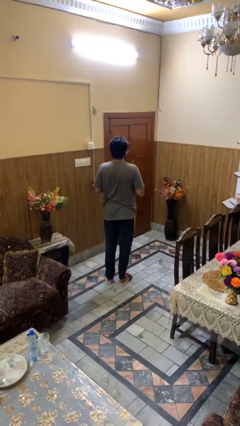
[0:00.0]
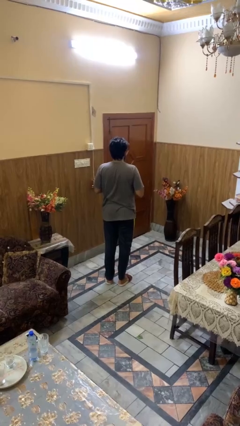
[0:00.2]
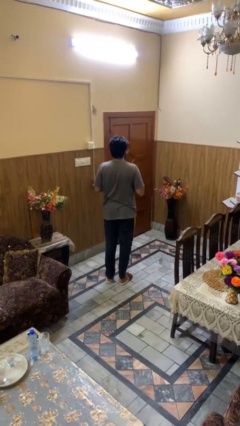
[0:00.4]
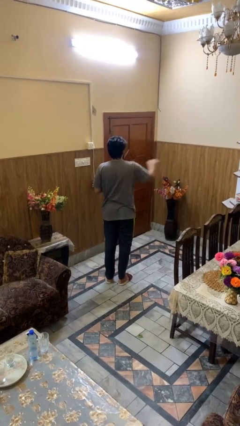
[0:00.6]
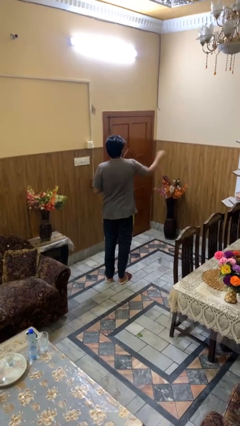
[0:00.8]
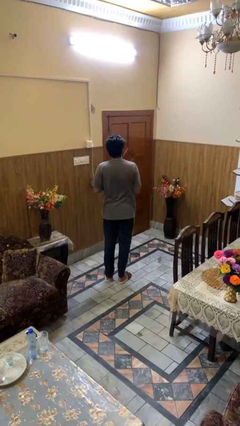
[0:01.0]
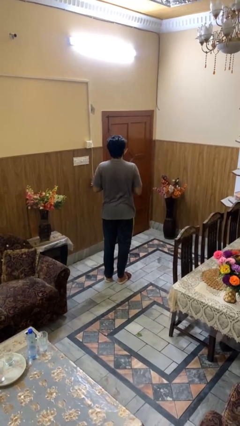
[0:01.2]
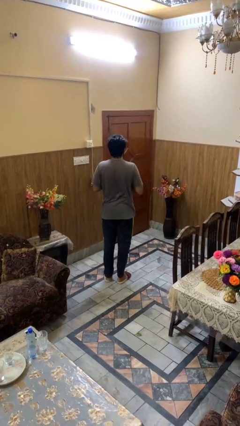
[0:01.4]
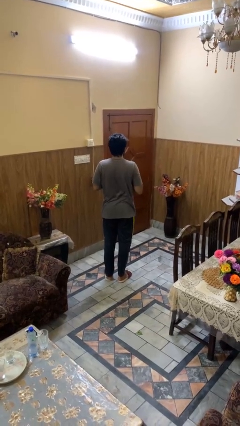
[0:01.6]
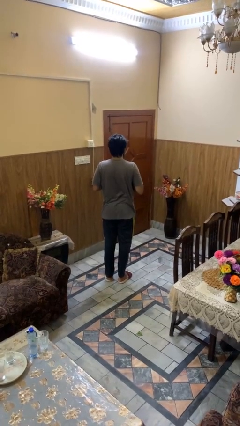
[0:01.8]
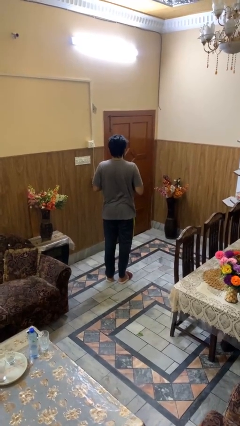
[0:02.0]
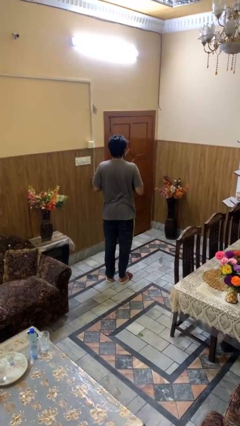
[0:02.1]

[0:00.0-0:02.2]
person karate chop

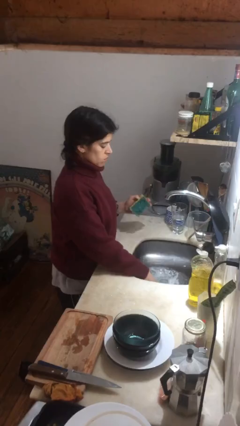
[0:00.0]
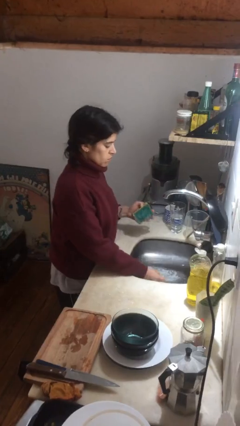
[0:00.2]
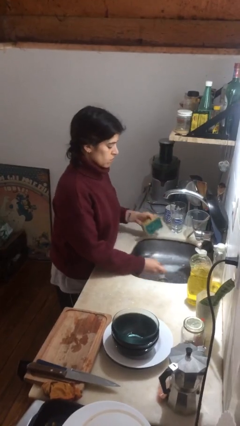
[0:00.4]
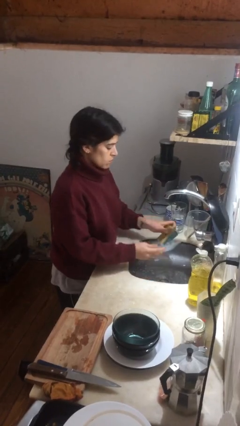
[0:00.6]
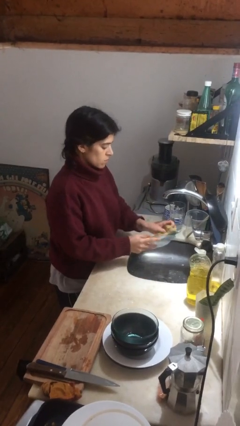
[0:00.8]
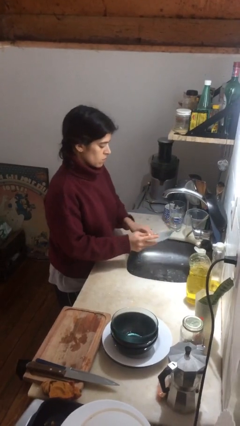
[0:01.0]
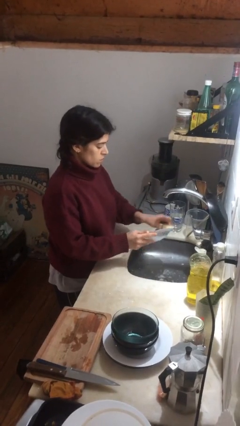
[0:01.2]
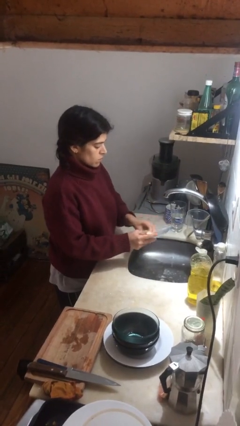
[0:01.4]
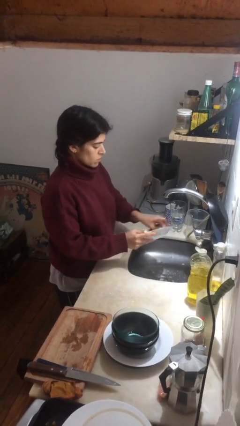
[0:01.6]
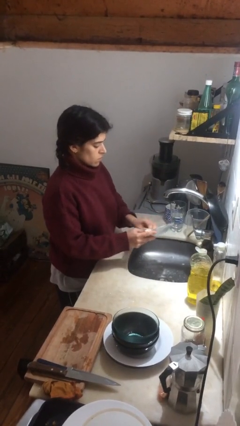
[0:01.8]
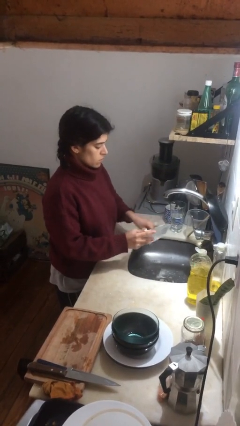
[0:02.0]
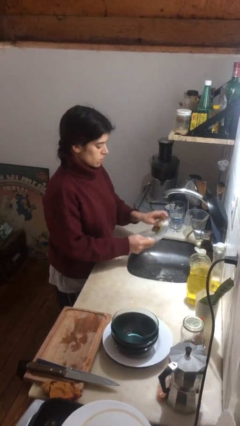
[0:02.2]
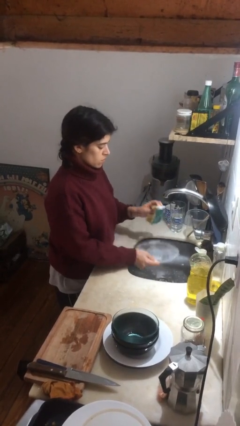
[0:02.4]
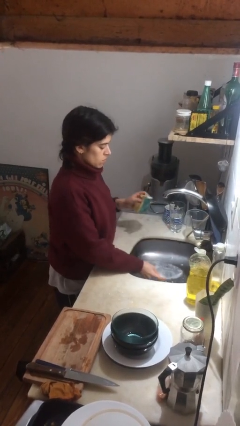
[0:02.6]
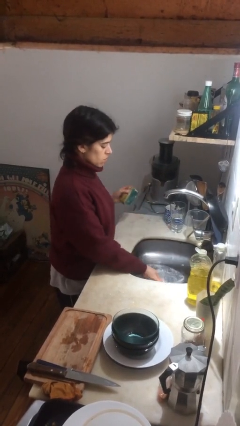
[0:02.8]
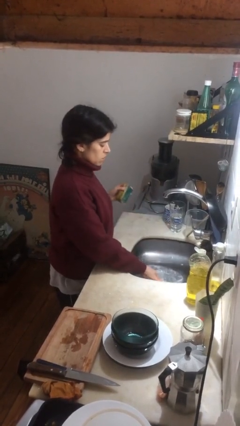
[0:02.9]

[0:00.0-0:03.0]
person washes dish

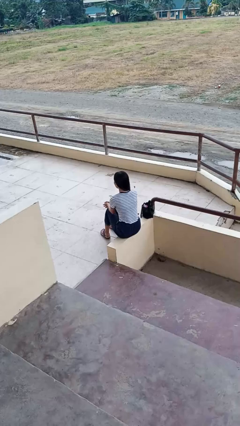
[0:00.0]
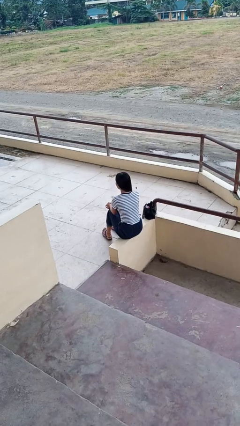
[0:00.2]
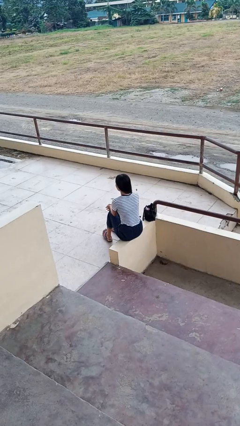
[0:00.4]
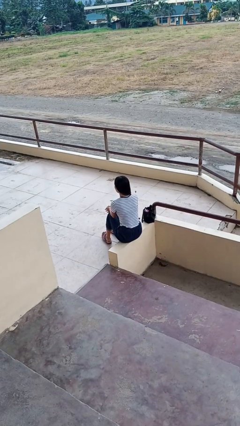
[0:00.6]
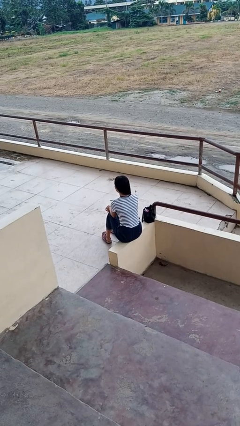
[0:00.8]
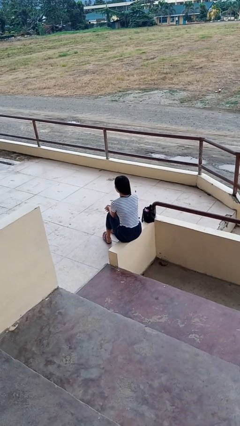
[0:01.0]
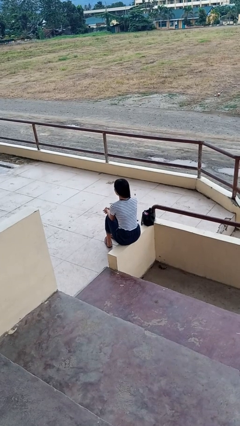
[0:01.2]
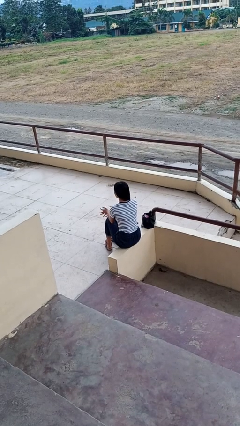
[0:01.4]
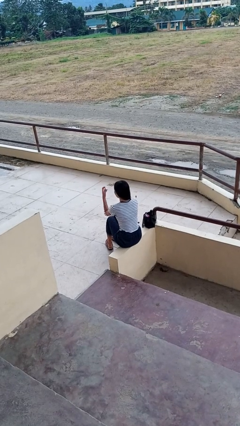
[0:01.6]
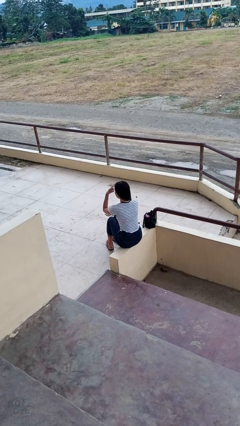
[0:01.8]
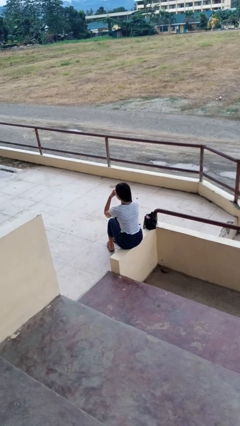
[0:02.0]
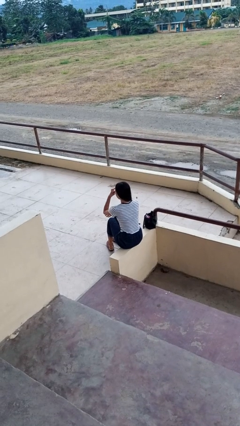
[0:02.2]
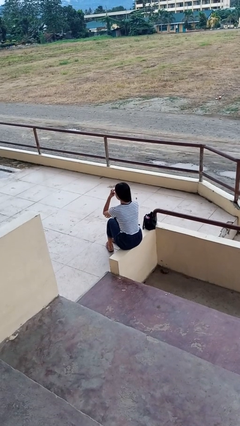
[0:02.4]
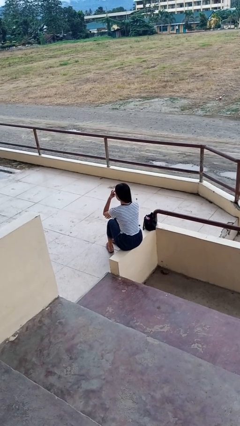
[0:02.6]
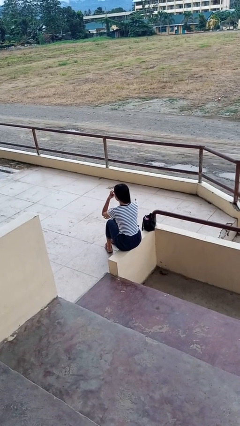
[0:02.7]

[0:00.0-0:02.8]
person gestures watch closely

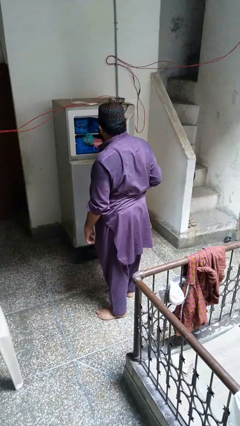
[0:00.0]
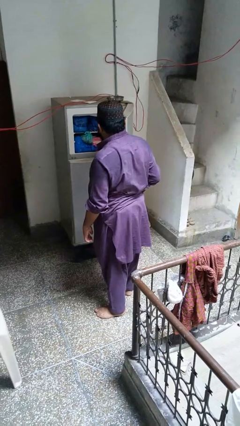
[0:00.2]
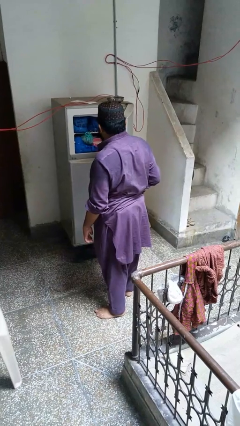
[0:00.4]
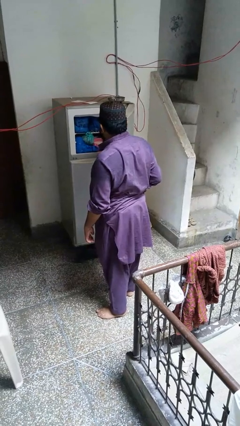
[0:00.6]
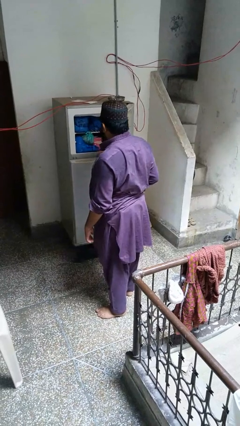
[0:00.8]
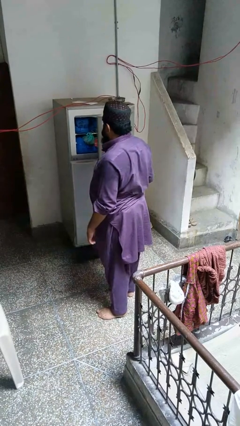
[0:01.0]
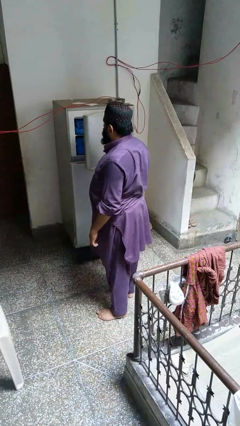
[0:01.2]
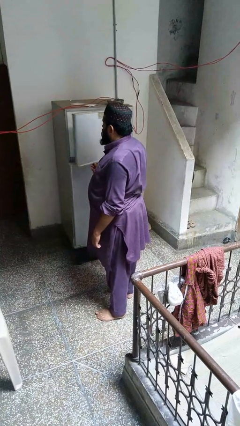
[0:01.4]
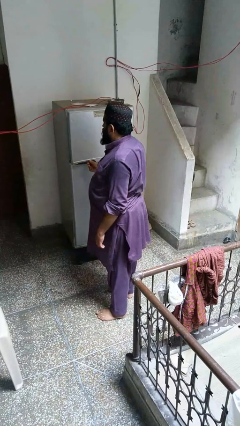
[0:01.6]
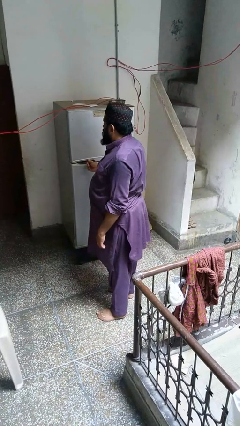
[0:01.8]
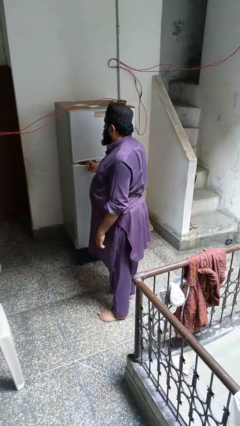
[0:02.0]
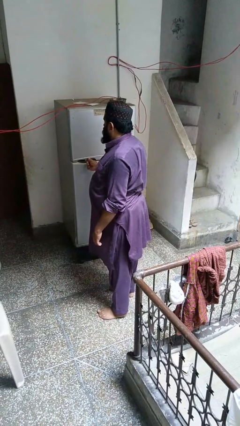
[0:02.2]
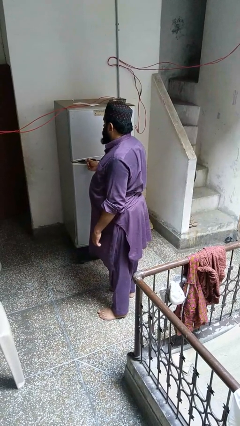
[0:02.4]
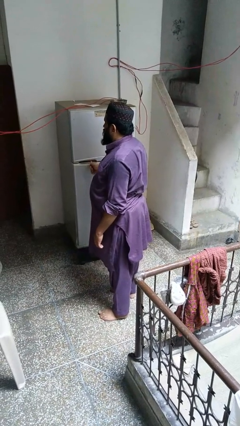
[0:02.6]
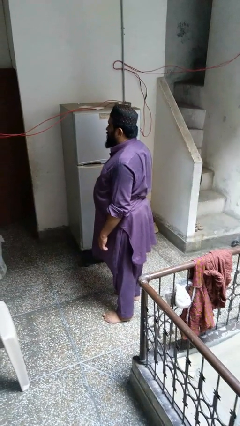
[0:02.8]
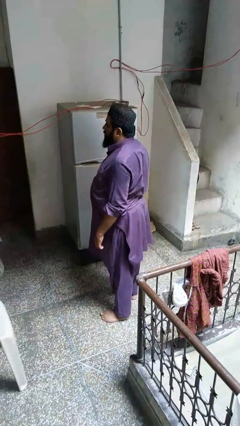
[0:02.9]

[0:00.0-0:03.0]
person closes refrigerator

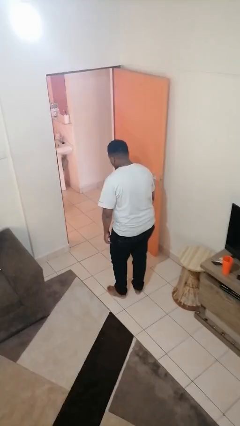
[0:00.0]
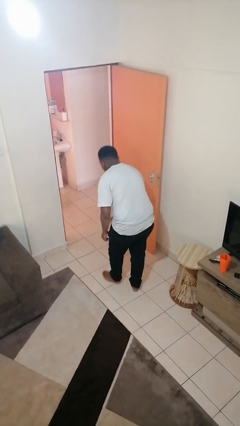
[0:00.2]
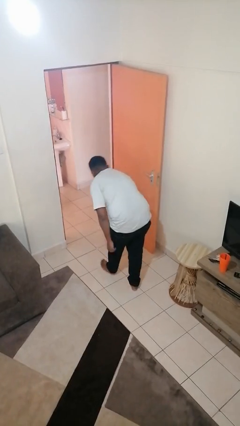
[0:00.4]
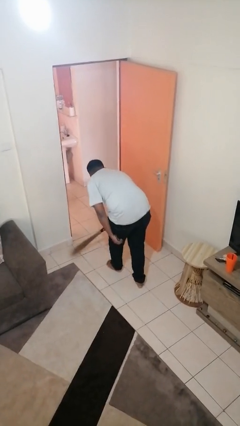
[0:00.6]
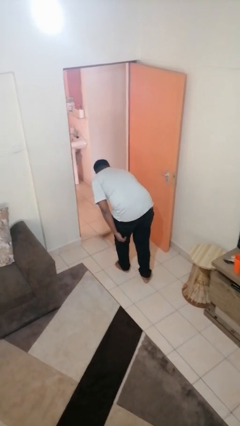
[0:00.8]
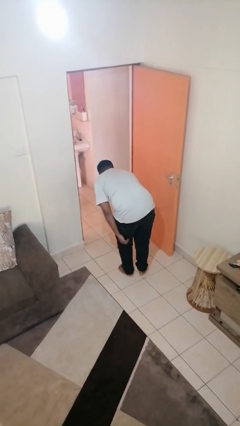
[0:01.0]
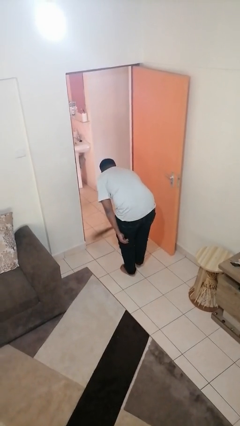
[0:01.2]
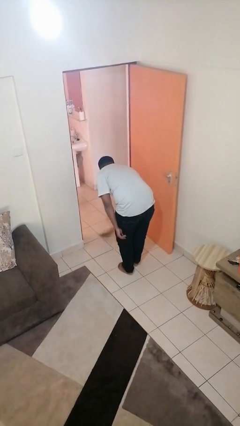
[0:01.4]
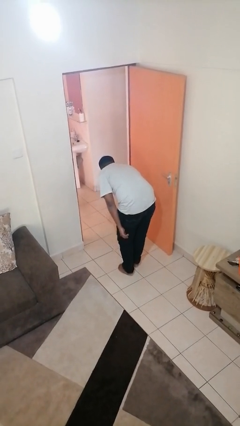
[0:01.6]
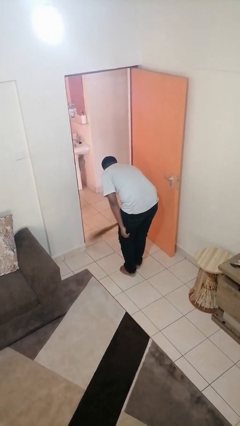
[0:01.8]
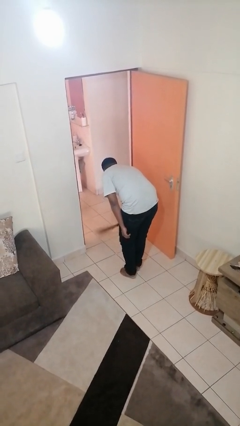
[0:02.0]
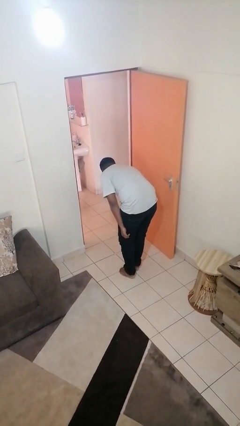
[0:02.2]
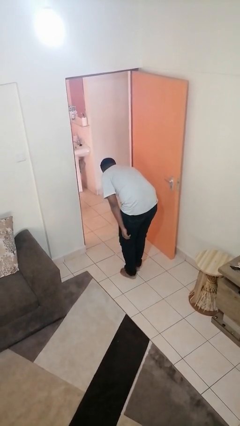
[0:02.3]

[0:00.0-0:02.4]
person sweeps floor

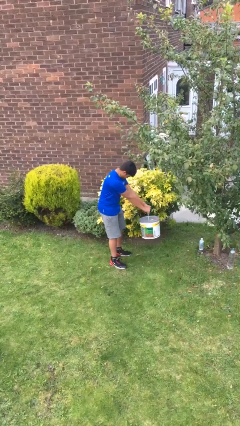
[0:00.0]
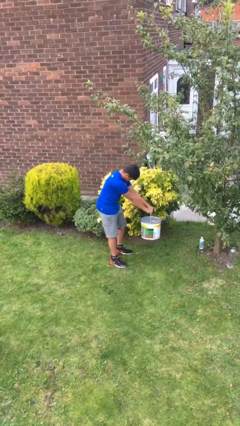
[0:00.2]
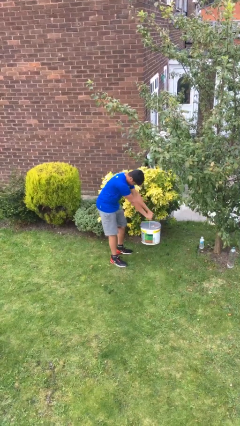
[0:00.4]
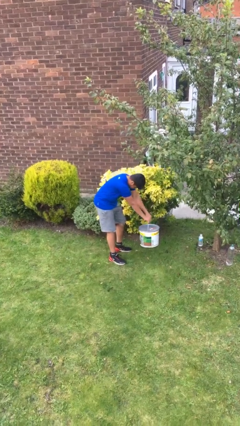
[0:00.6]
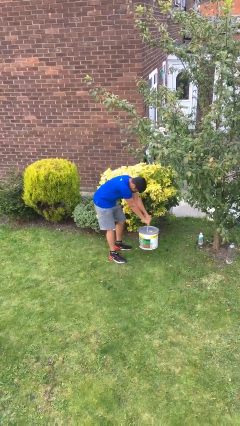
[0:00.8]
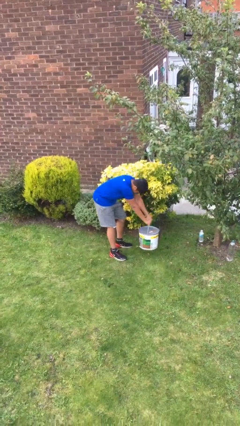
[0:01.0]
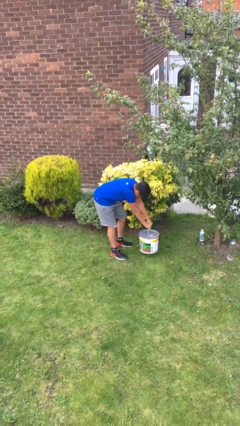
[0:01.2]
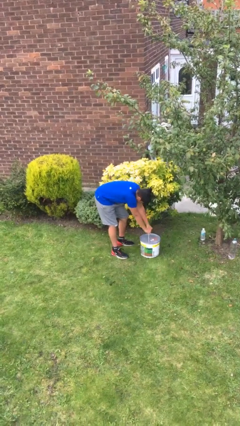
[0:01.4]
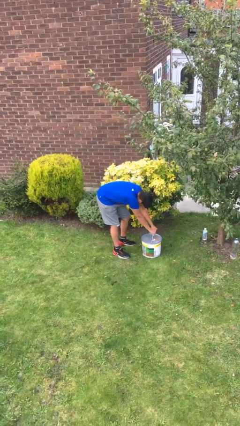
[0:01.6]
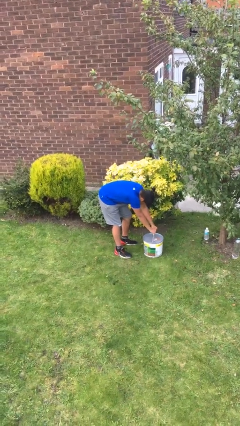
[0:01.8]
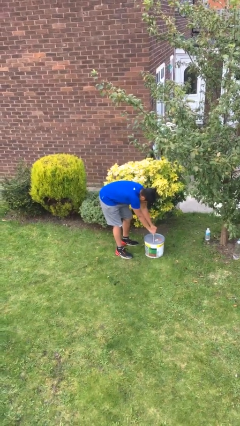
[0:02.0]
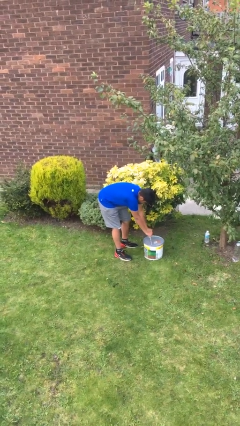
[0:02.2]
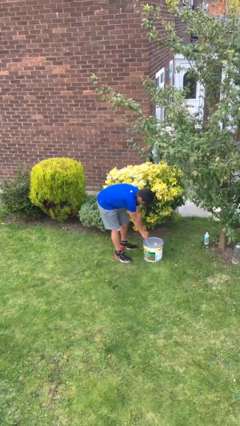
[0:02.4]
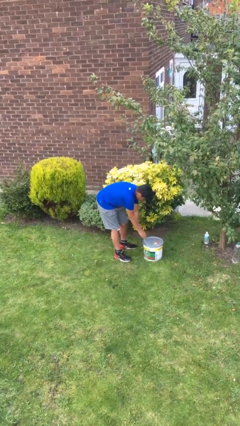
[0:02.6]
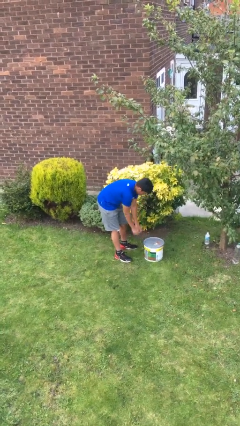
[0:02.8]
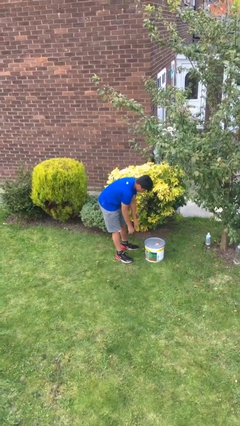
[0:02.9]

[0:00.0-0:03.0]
person puts down object on floor

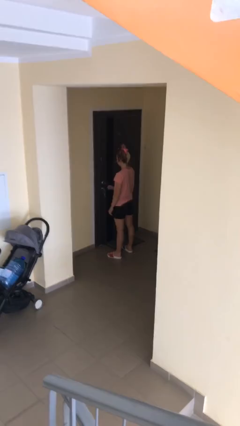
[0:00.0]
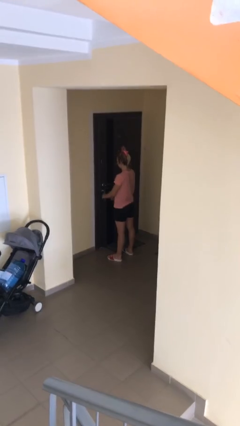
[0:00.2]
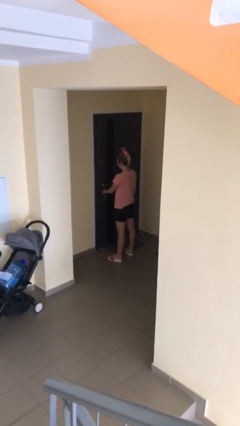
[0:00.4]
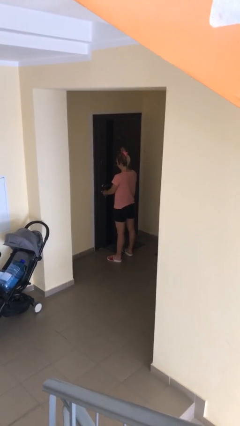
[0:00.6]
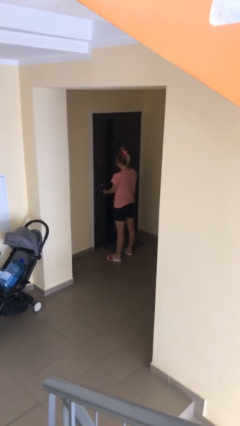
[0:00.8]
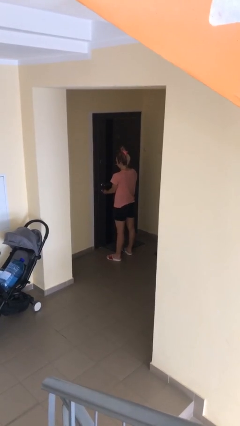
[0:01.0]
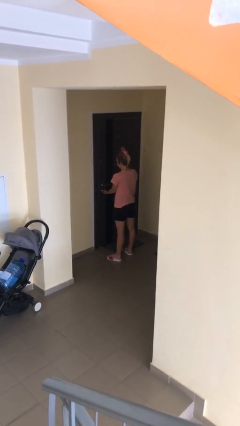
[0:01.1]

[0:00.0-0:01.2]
person locks door with keys
